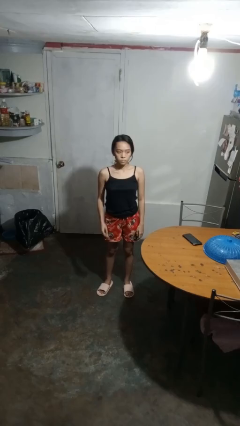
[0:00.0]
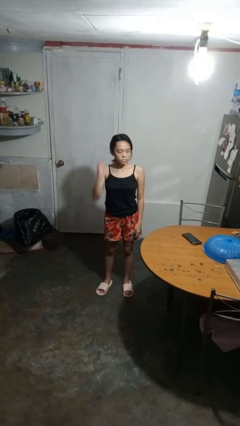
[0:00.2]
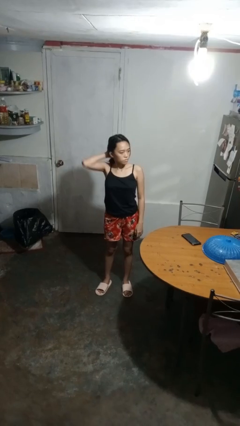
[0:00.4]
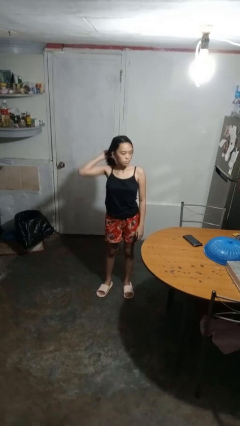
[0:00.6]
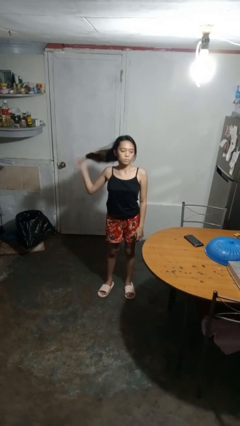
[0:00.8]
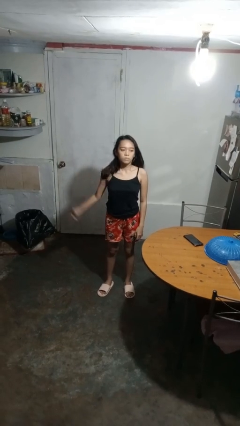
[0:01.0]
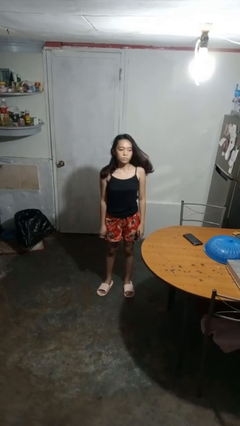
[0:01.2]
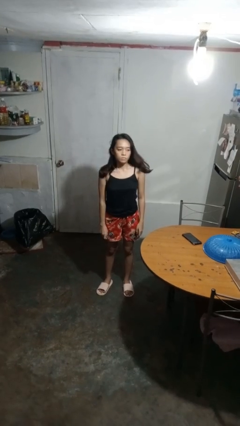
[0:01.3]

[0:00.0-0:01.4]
person takes off hairtie

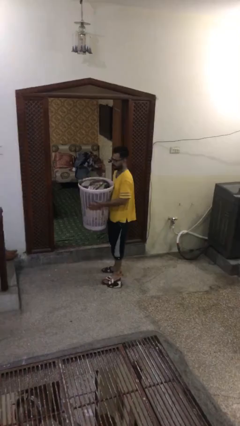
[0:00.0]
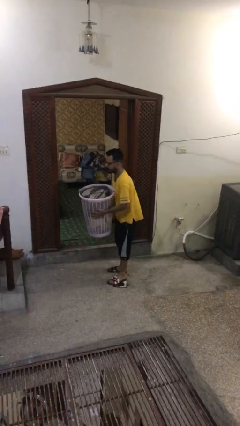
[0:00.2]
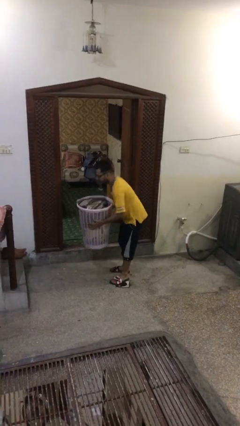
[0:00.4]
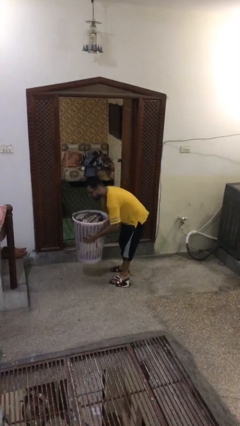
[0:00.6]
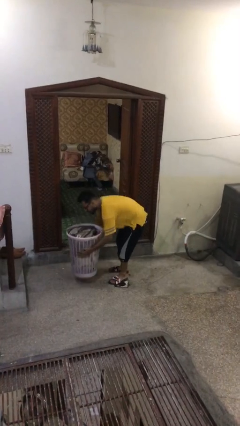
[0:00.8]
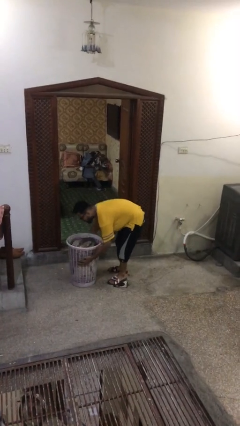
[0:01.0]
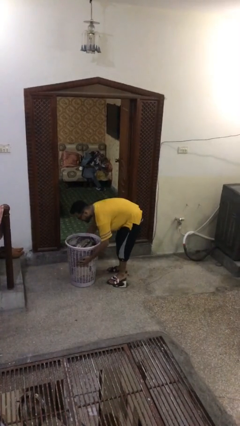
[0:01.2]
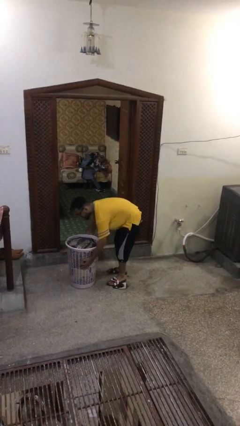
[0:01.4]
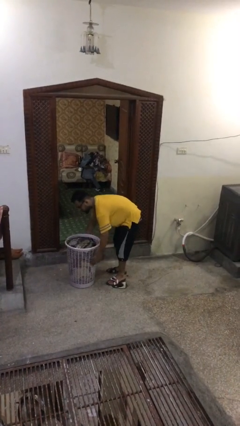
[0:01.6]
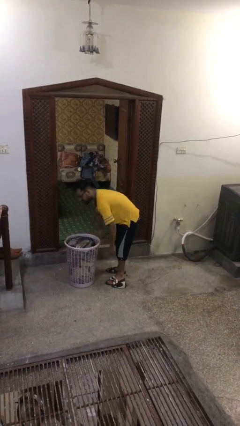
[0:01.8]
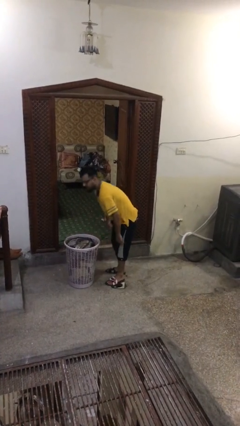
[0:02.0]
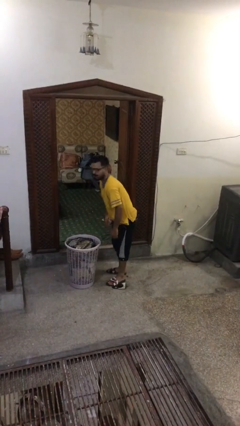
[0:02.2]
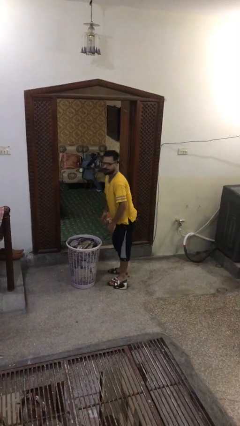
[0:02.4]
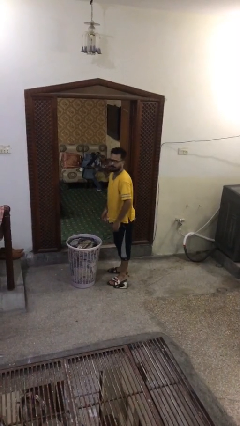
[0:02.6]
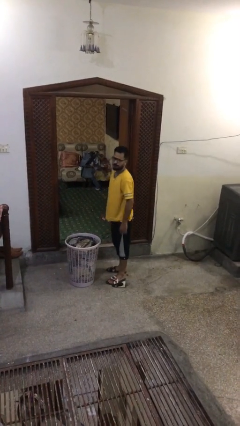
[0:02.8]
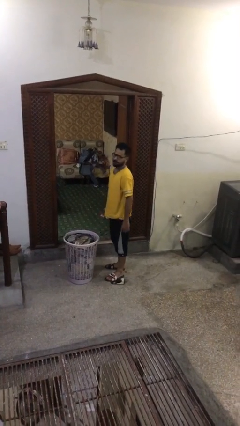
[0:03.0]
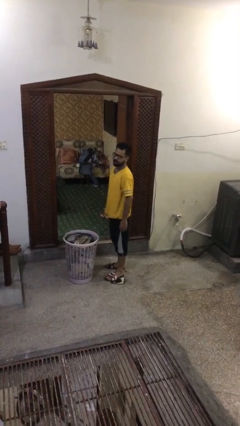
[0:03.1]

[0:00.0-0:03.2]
person puts down object on floor

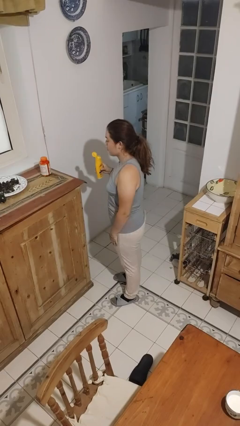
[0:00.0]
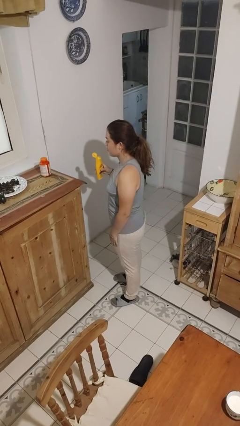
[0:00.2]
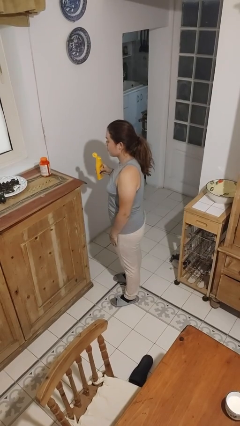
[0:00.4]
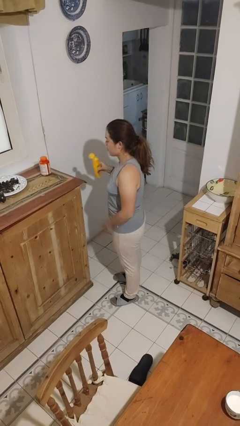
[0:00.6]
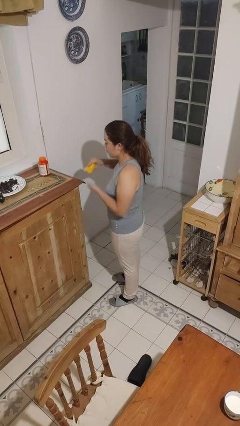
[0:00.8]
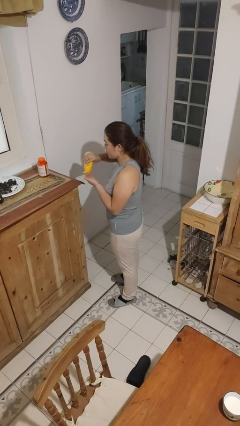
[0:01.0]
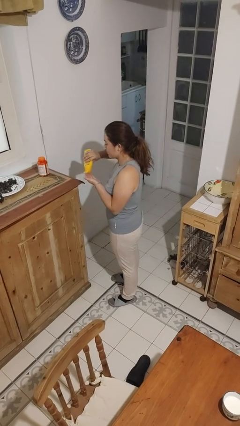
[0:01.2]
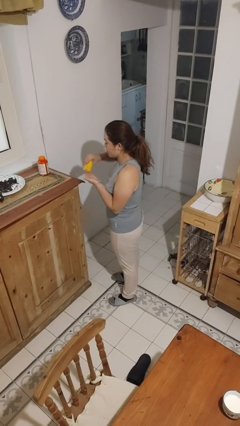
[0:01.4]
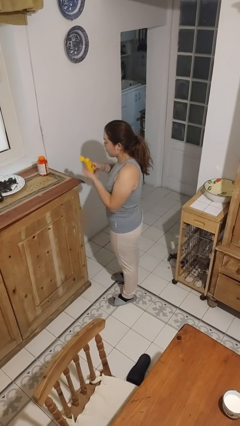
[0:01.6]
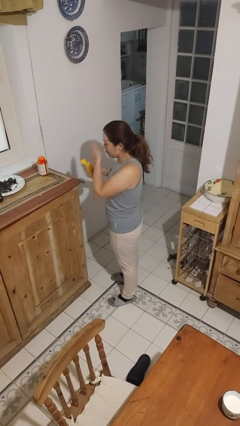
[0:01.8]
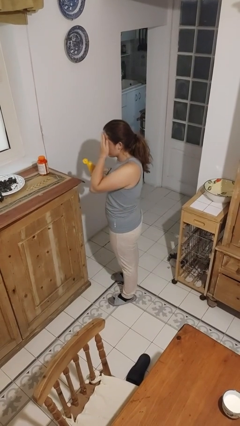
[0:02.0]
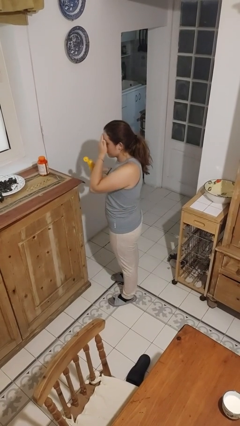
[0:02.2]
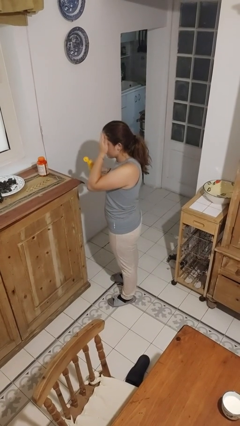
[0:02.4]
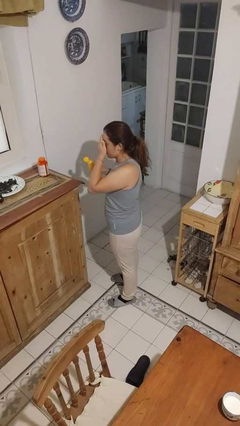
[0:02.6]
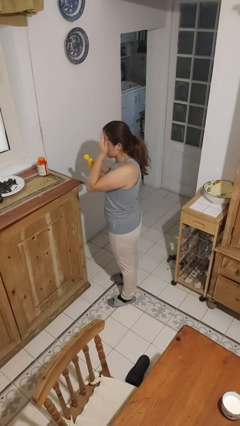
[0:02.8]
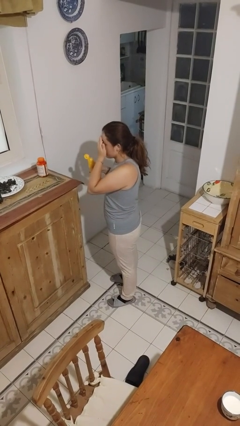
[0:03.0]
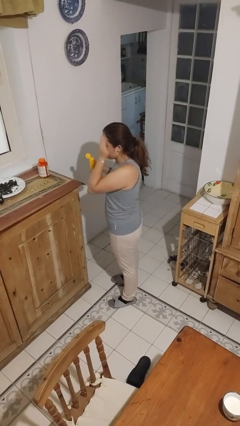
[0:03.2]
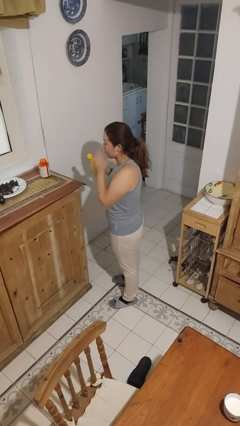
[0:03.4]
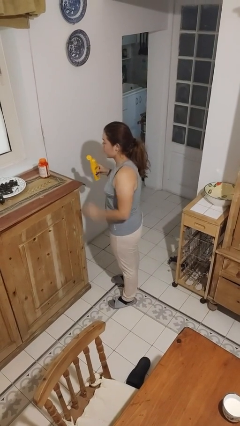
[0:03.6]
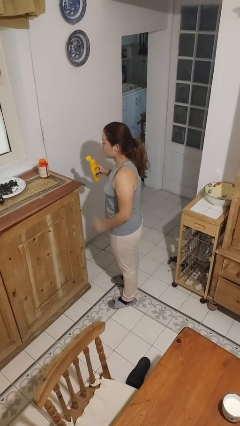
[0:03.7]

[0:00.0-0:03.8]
person applies sunscreen

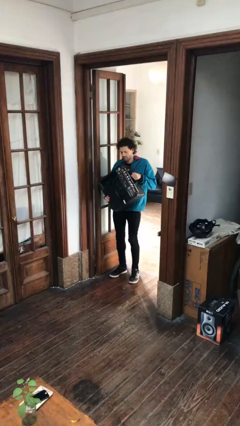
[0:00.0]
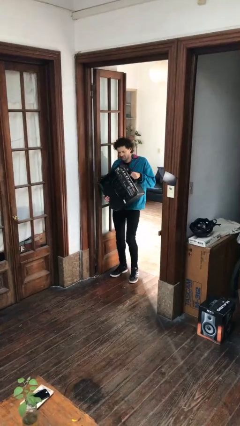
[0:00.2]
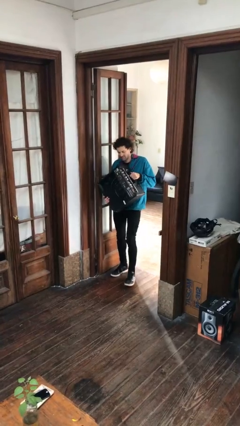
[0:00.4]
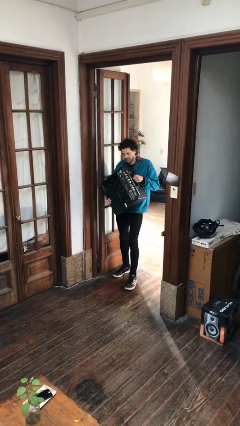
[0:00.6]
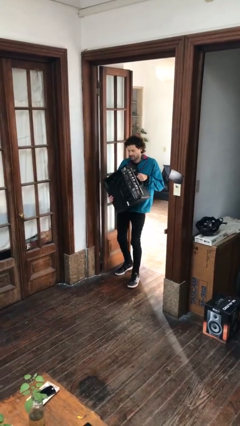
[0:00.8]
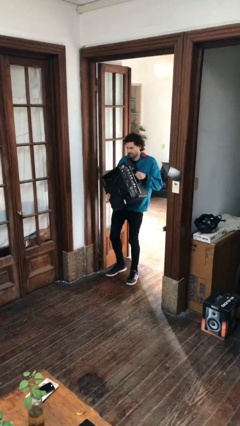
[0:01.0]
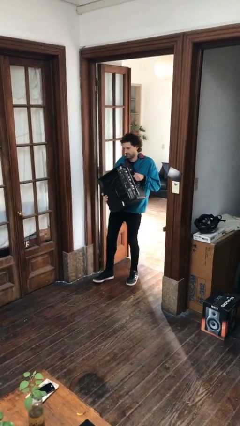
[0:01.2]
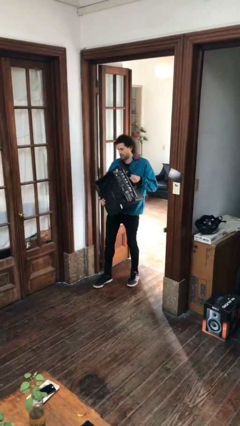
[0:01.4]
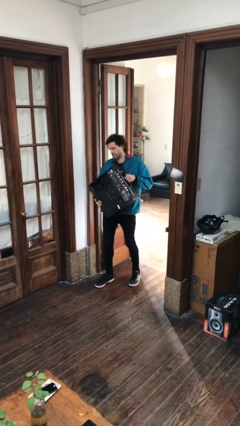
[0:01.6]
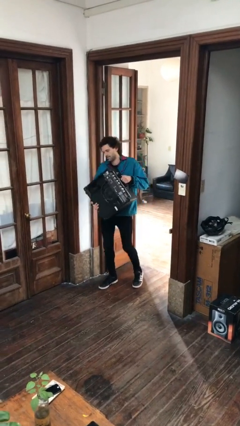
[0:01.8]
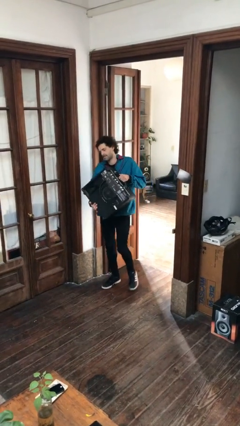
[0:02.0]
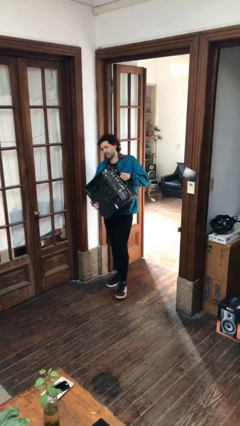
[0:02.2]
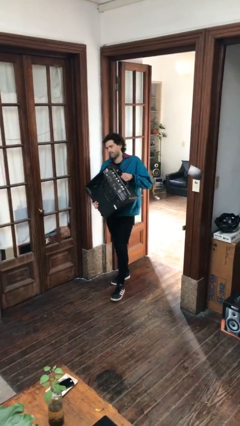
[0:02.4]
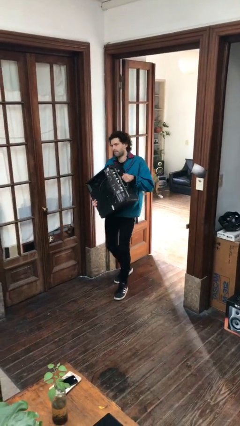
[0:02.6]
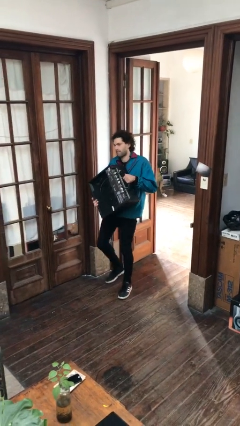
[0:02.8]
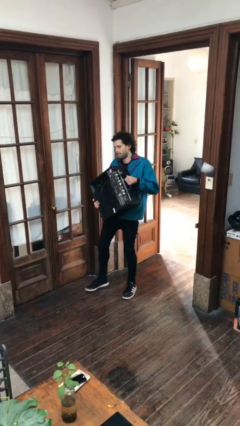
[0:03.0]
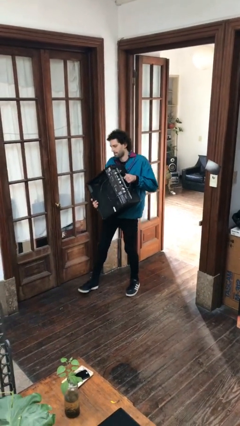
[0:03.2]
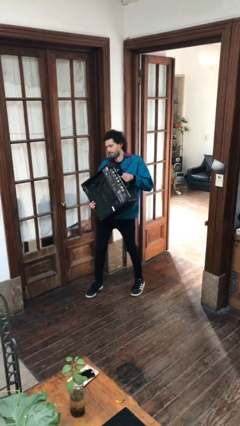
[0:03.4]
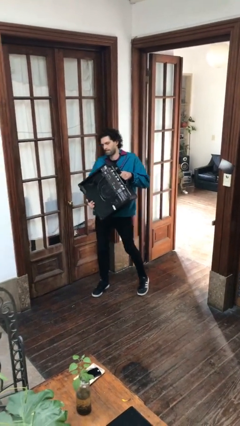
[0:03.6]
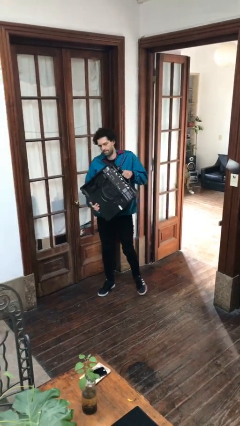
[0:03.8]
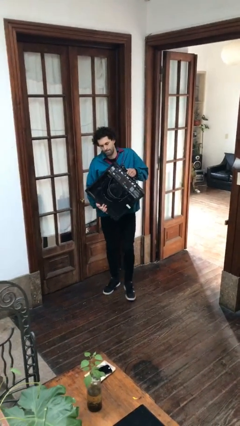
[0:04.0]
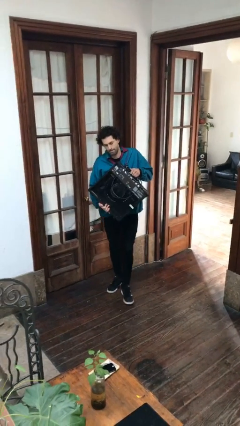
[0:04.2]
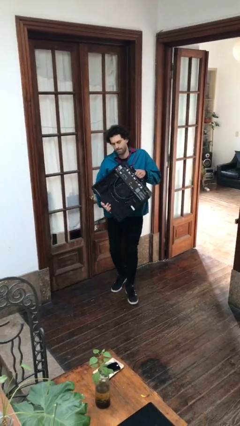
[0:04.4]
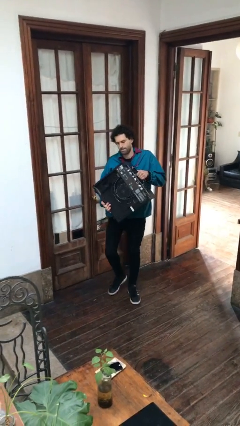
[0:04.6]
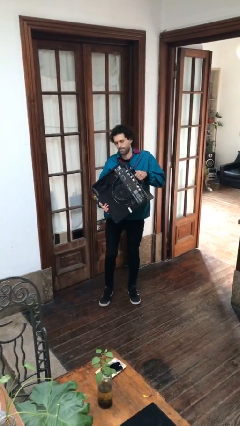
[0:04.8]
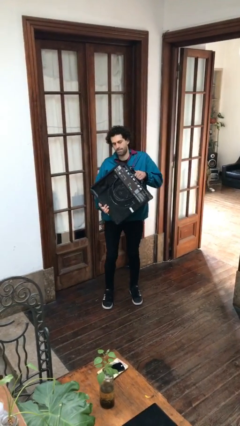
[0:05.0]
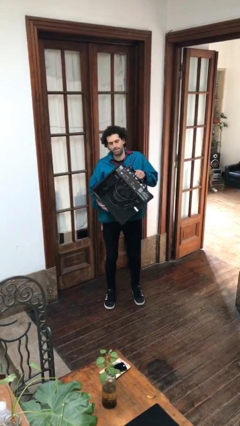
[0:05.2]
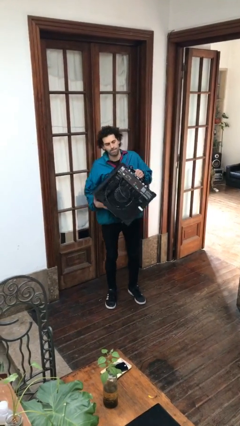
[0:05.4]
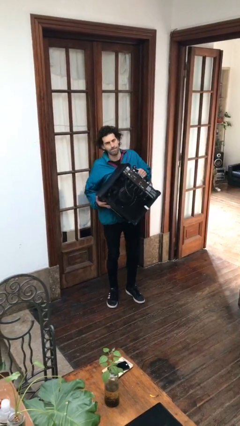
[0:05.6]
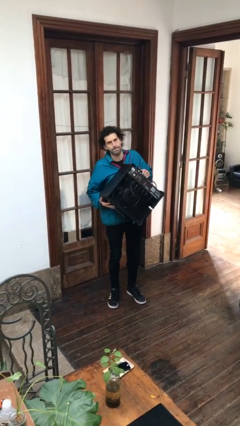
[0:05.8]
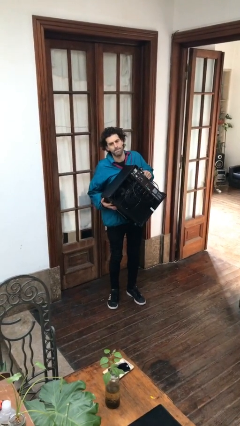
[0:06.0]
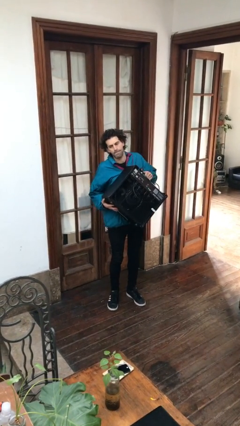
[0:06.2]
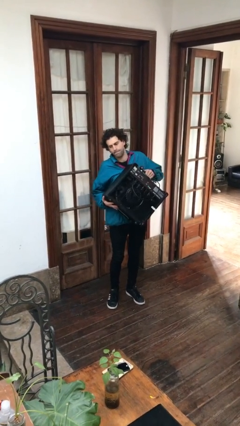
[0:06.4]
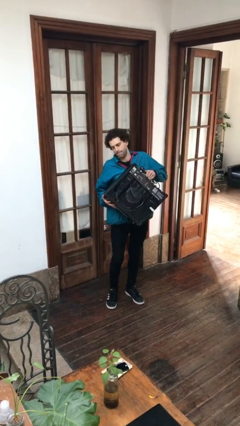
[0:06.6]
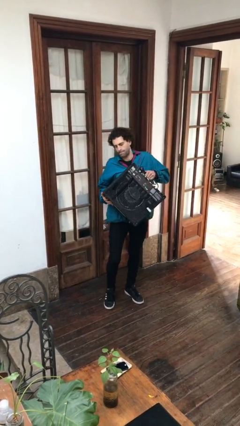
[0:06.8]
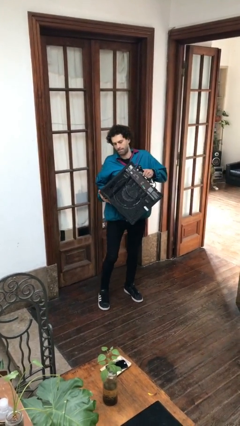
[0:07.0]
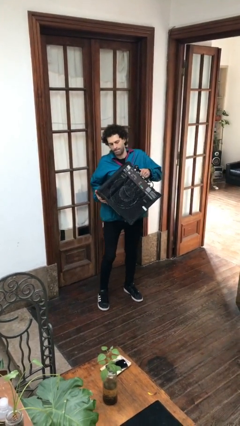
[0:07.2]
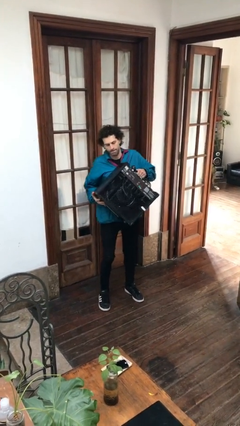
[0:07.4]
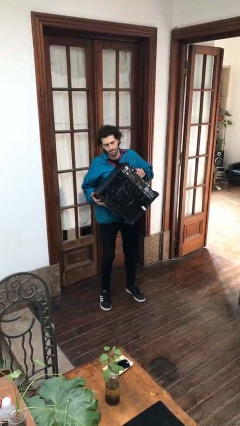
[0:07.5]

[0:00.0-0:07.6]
person carries heavy object

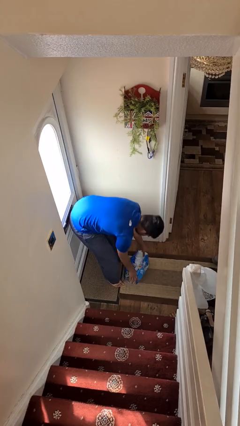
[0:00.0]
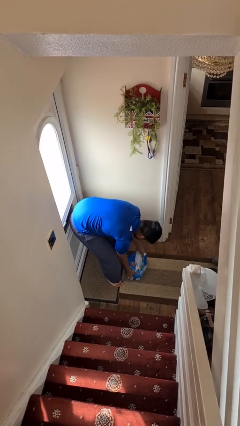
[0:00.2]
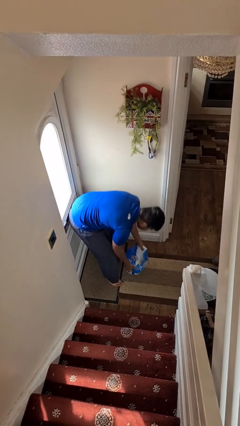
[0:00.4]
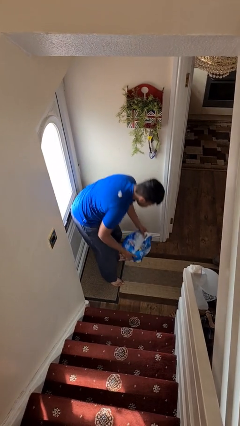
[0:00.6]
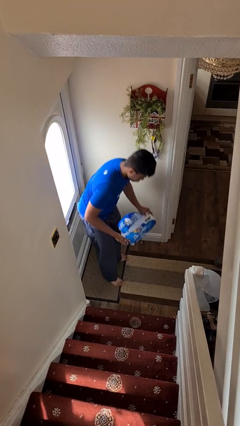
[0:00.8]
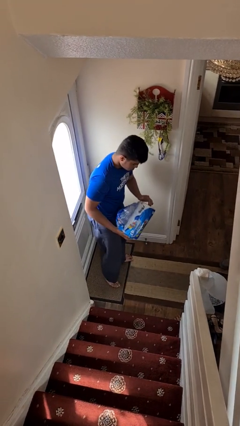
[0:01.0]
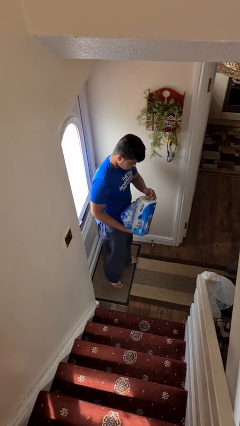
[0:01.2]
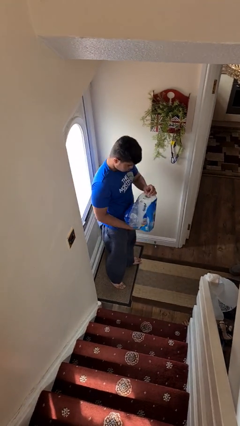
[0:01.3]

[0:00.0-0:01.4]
person picks up object from floor

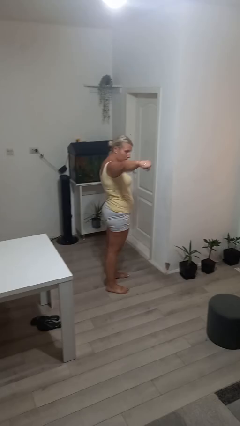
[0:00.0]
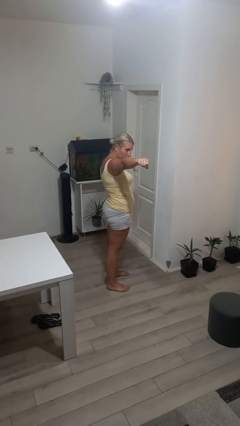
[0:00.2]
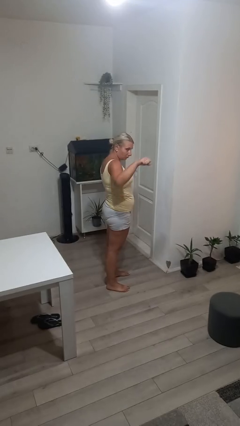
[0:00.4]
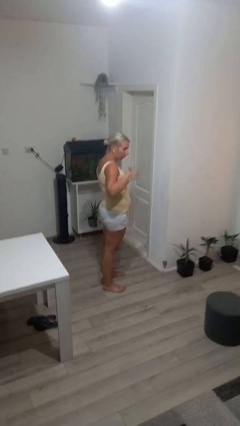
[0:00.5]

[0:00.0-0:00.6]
person karate chop
